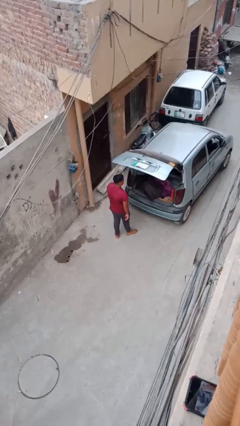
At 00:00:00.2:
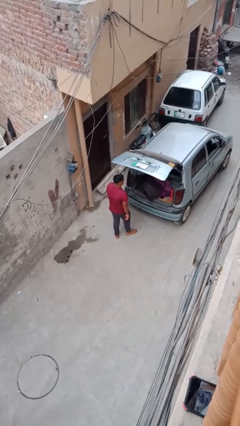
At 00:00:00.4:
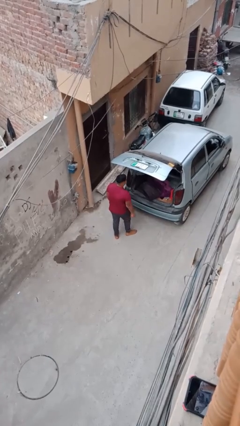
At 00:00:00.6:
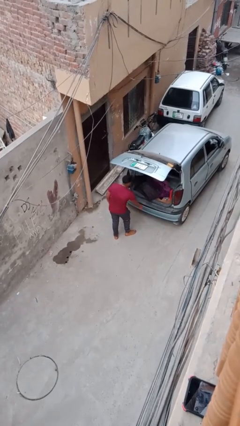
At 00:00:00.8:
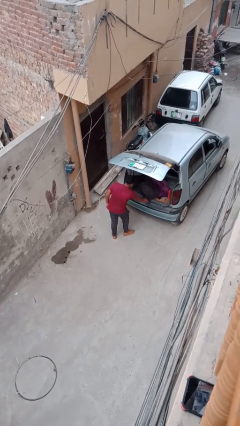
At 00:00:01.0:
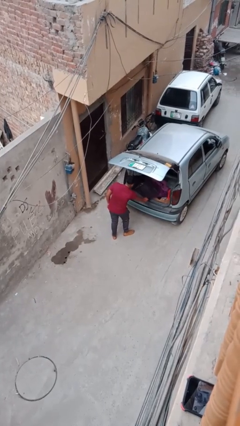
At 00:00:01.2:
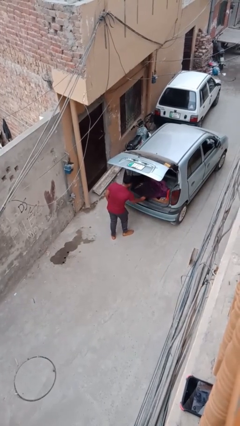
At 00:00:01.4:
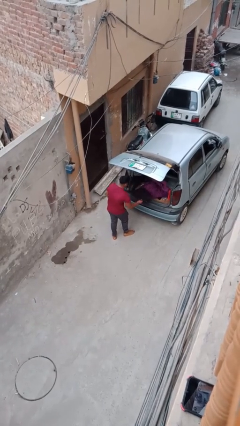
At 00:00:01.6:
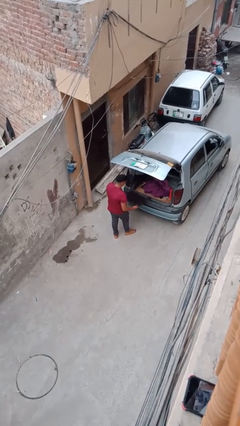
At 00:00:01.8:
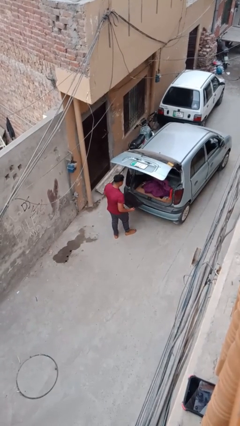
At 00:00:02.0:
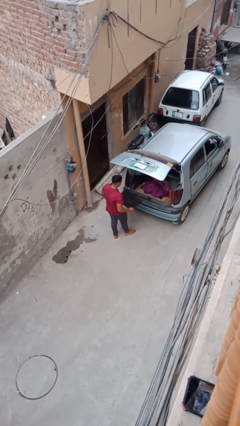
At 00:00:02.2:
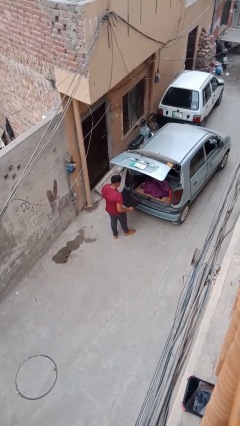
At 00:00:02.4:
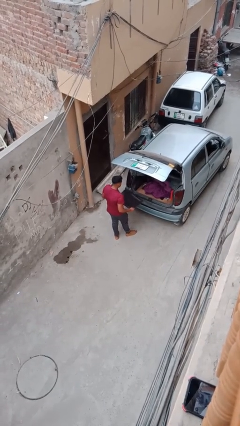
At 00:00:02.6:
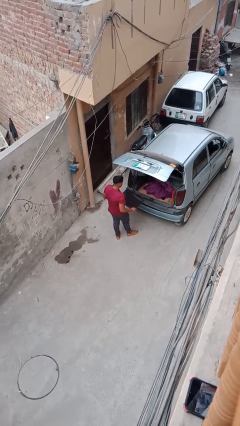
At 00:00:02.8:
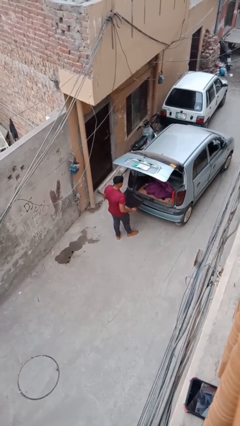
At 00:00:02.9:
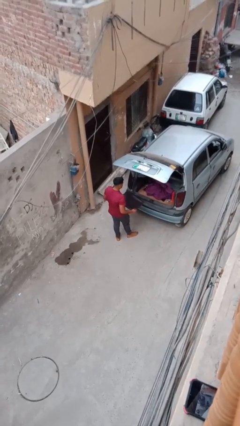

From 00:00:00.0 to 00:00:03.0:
person unloads car

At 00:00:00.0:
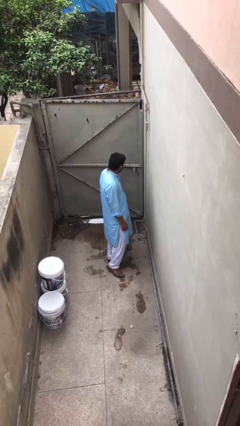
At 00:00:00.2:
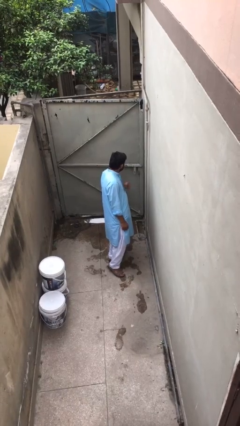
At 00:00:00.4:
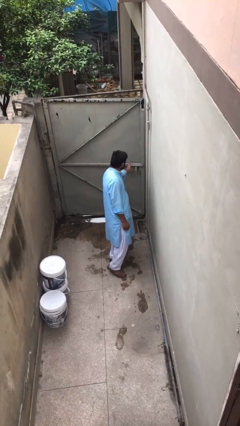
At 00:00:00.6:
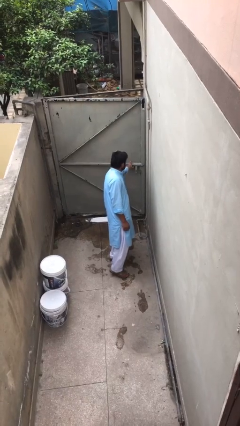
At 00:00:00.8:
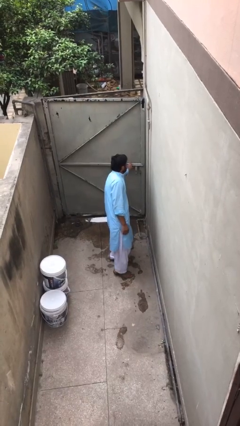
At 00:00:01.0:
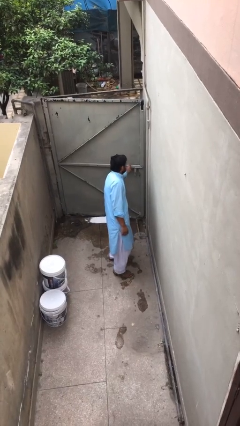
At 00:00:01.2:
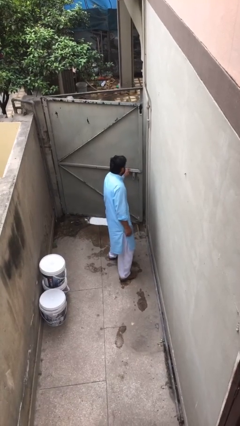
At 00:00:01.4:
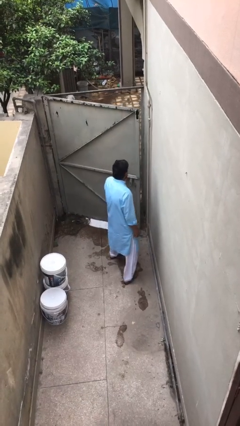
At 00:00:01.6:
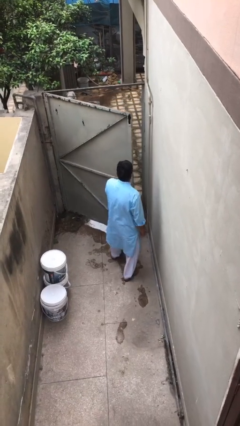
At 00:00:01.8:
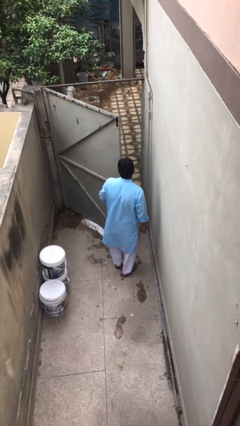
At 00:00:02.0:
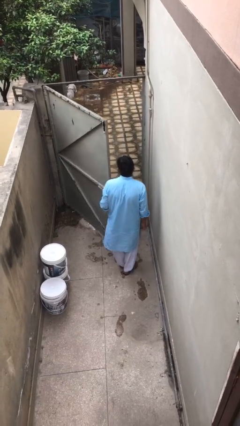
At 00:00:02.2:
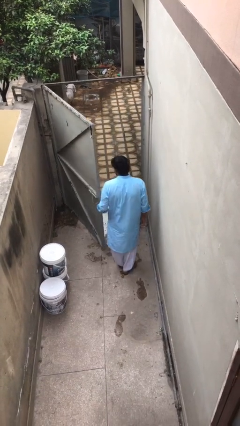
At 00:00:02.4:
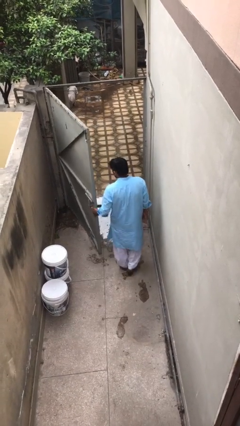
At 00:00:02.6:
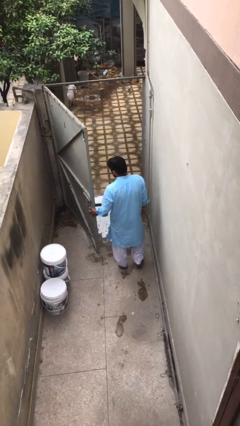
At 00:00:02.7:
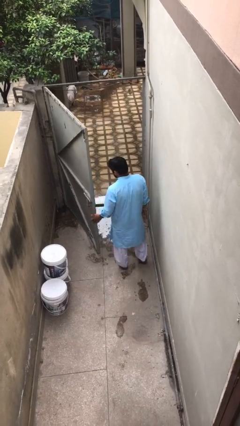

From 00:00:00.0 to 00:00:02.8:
person opens facility door

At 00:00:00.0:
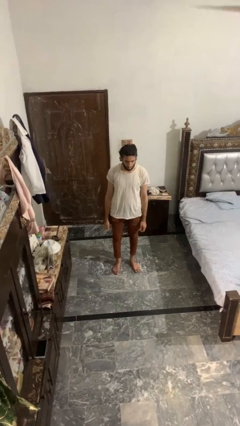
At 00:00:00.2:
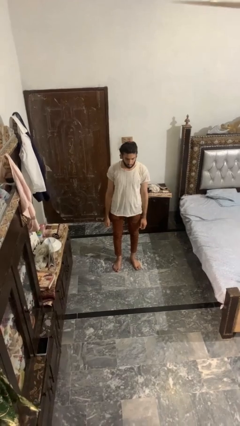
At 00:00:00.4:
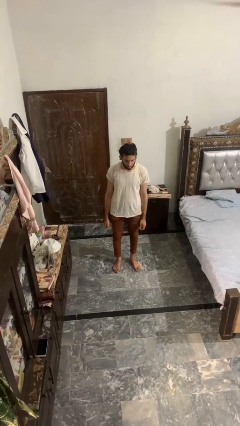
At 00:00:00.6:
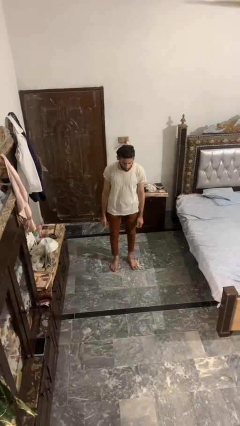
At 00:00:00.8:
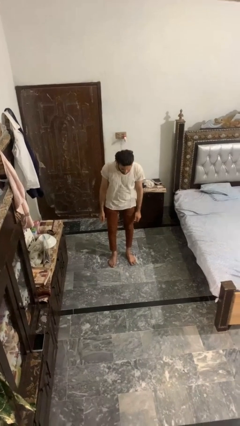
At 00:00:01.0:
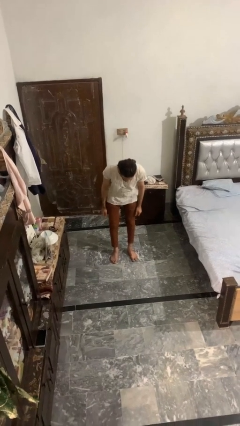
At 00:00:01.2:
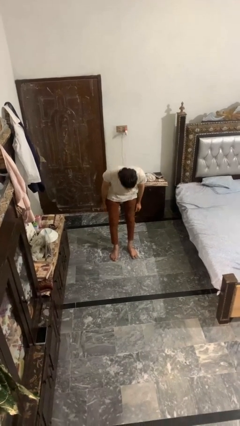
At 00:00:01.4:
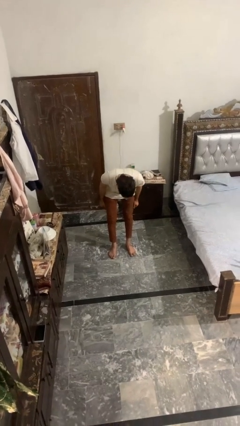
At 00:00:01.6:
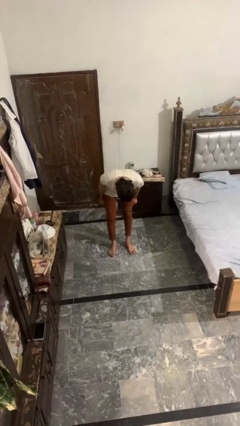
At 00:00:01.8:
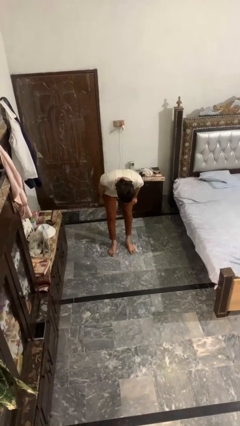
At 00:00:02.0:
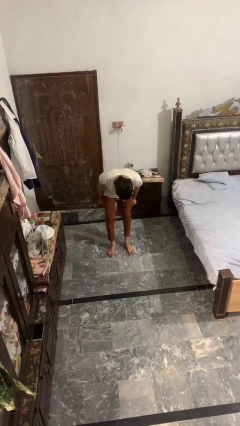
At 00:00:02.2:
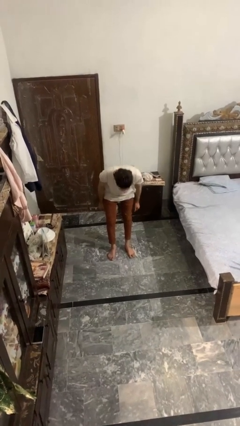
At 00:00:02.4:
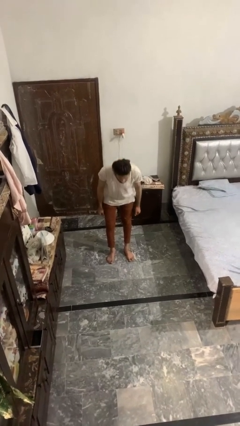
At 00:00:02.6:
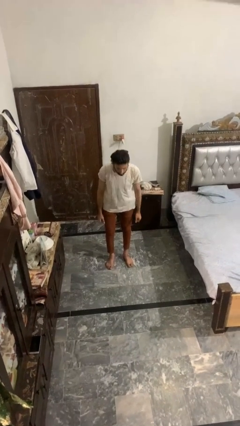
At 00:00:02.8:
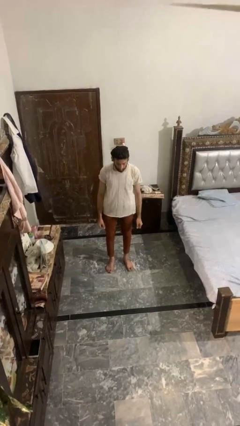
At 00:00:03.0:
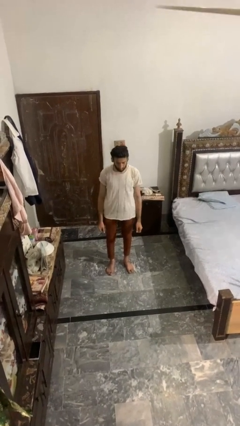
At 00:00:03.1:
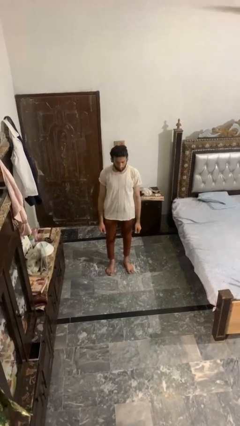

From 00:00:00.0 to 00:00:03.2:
person bows

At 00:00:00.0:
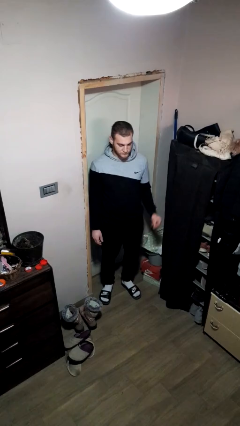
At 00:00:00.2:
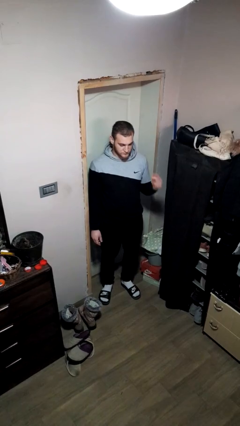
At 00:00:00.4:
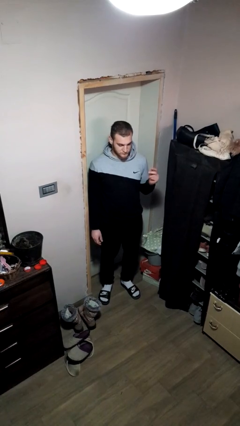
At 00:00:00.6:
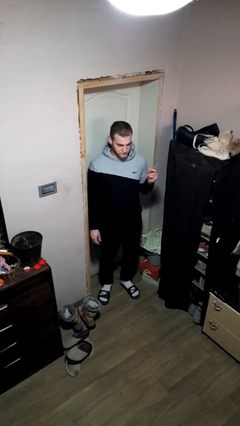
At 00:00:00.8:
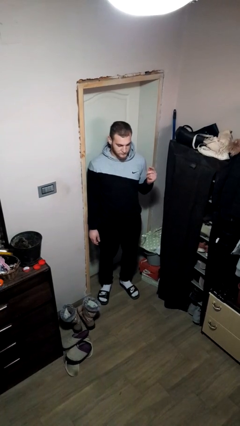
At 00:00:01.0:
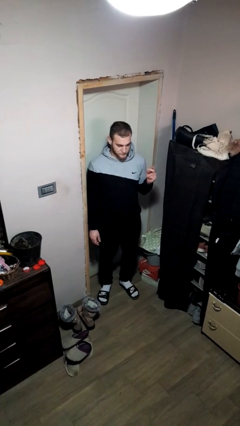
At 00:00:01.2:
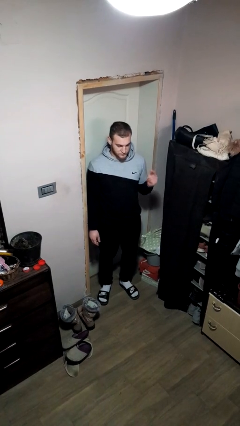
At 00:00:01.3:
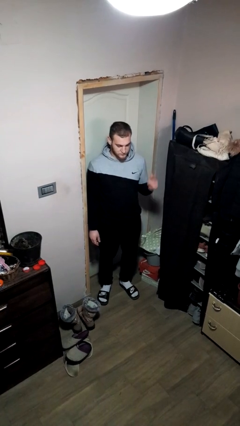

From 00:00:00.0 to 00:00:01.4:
person snaps fingers

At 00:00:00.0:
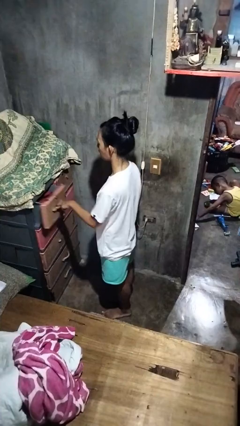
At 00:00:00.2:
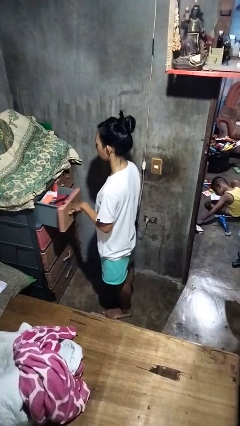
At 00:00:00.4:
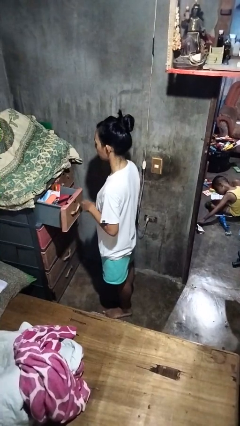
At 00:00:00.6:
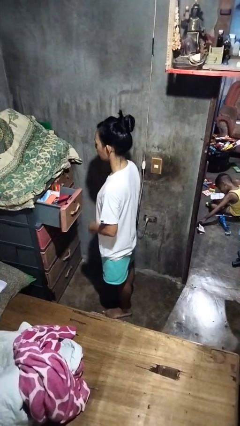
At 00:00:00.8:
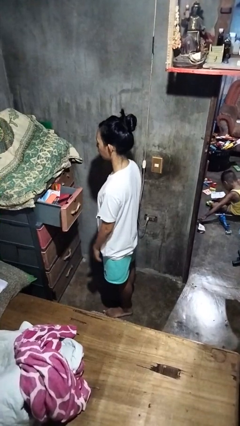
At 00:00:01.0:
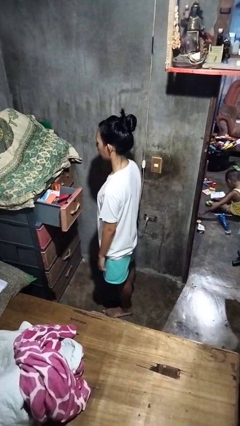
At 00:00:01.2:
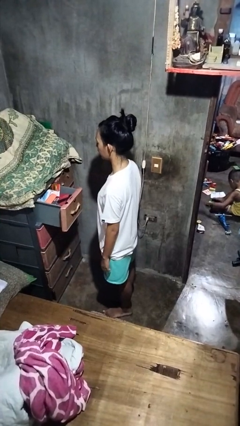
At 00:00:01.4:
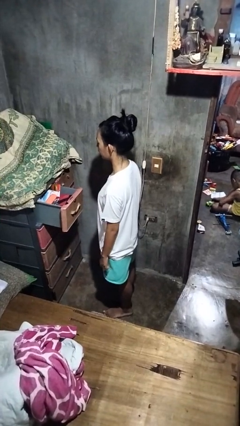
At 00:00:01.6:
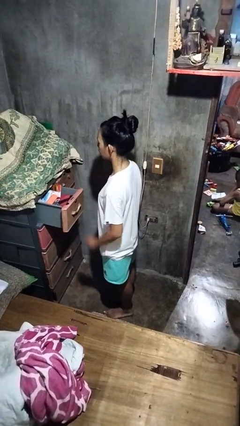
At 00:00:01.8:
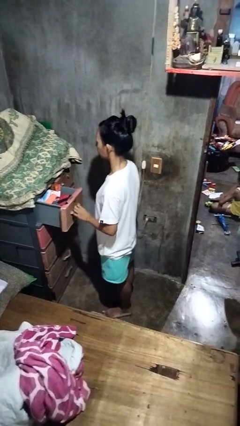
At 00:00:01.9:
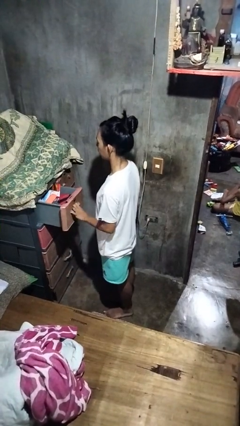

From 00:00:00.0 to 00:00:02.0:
person opens dresser drawer

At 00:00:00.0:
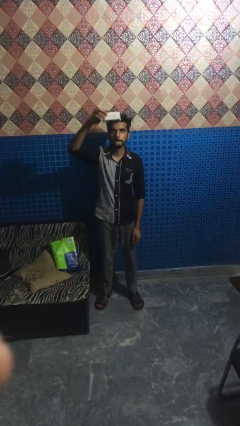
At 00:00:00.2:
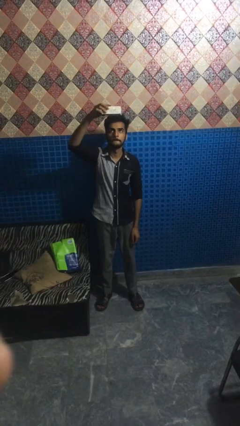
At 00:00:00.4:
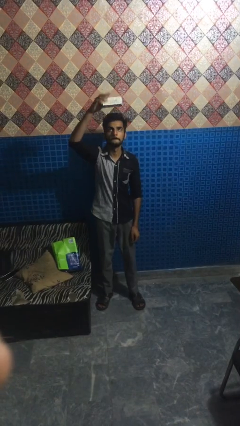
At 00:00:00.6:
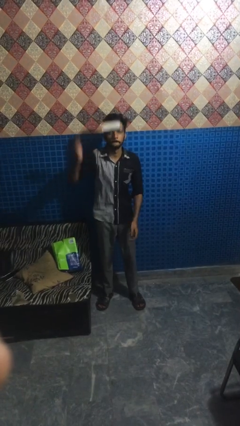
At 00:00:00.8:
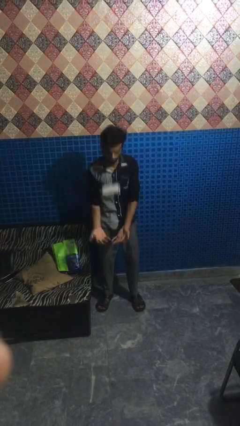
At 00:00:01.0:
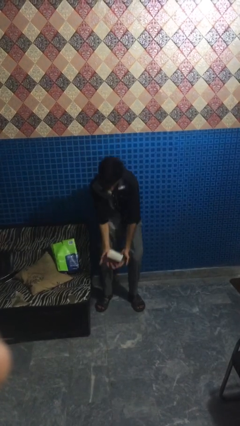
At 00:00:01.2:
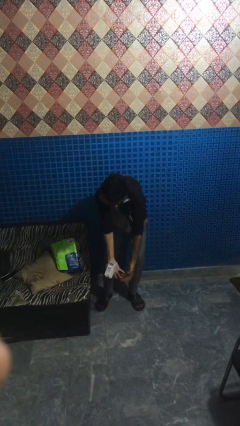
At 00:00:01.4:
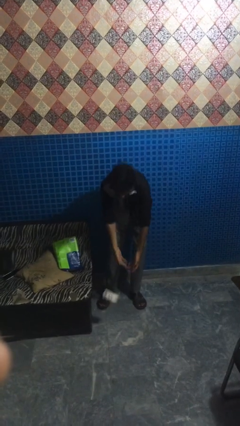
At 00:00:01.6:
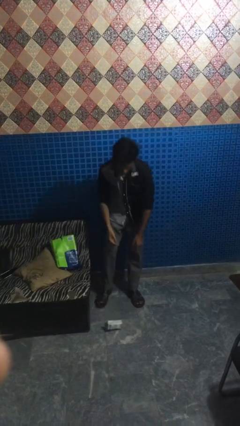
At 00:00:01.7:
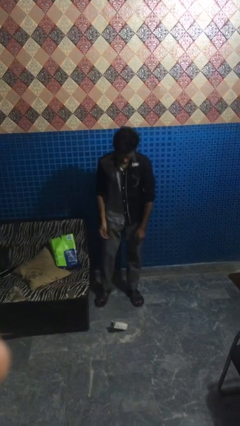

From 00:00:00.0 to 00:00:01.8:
person drops object

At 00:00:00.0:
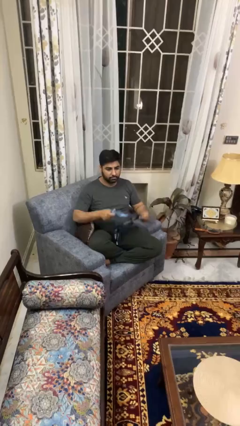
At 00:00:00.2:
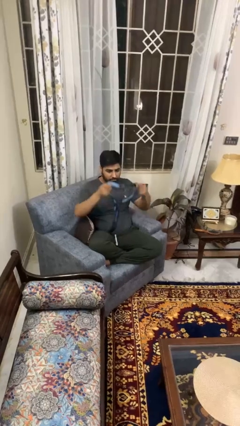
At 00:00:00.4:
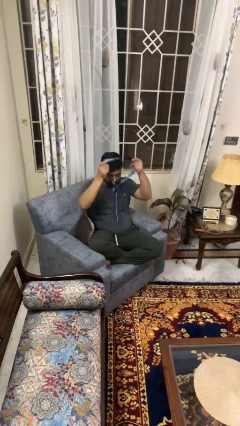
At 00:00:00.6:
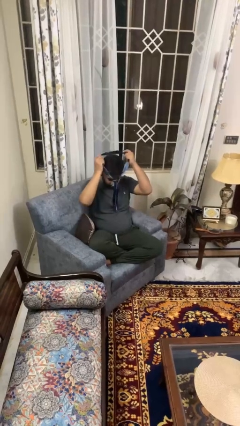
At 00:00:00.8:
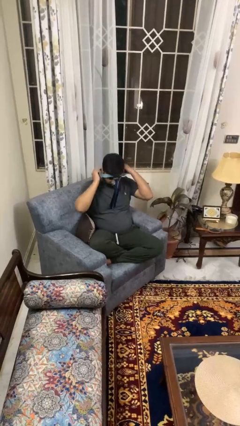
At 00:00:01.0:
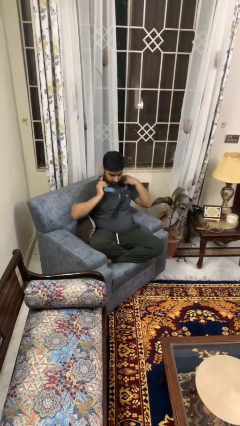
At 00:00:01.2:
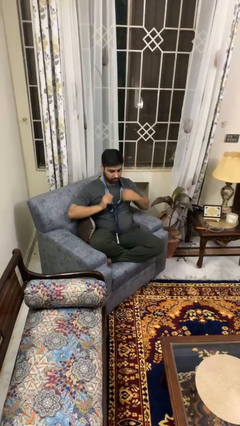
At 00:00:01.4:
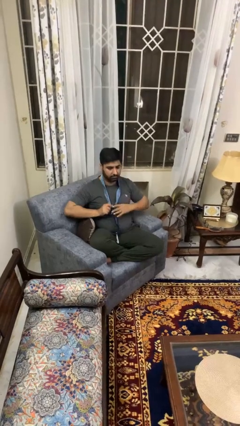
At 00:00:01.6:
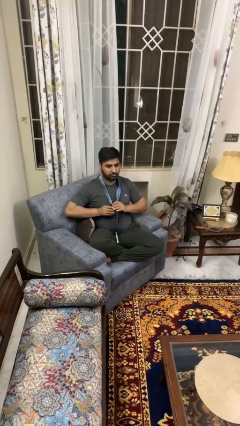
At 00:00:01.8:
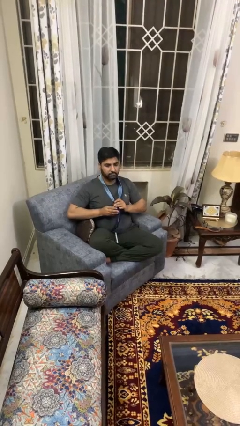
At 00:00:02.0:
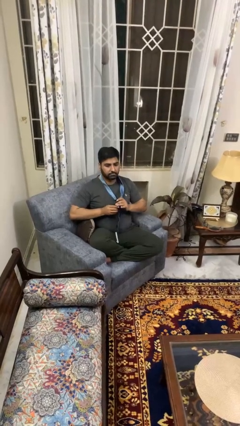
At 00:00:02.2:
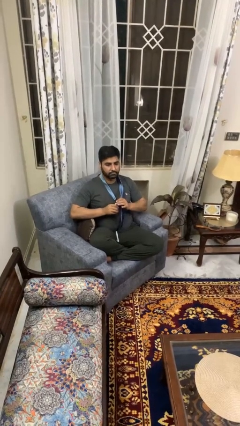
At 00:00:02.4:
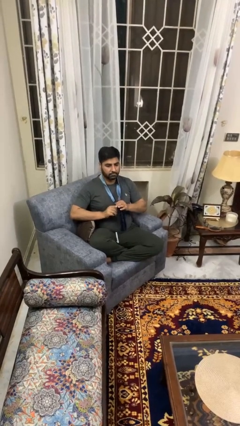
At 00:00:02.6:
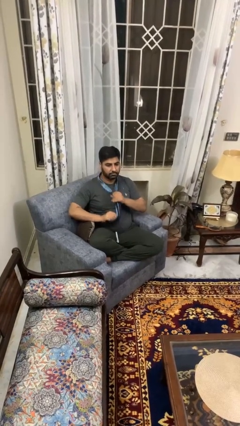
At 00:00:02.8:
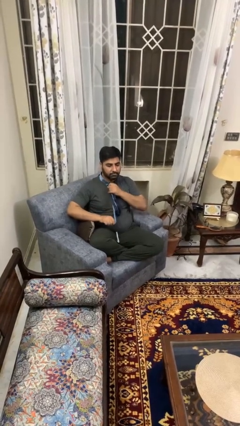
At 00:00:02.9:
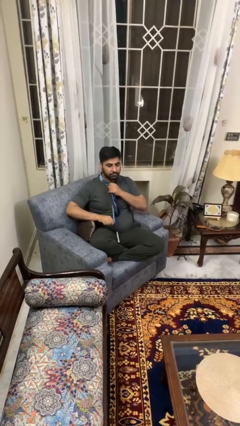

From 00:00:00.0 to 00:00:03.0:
person puts on necktie
